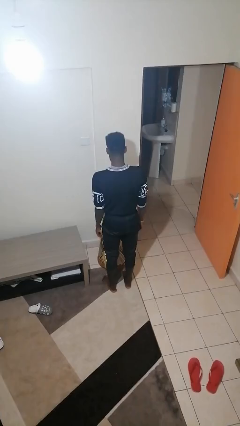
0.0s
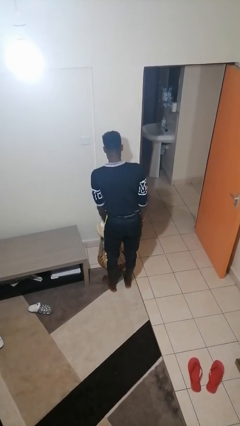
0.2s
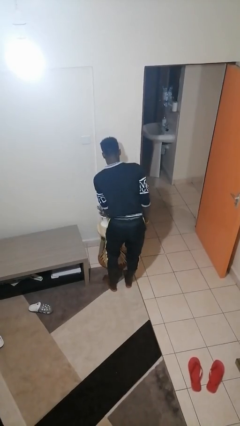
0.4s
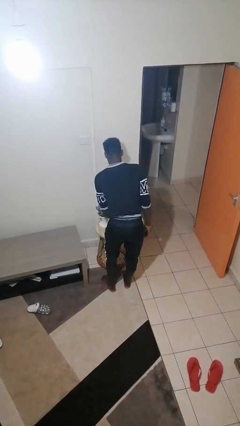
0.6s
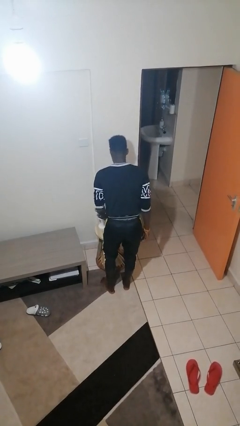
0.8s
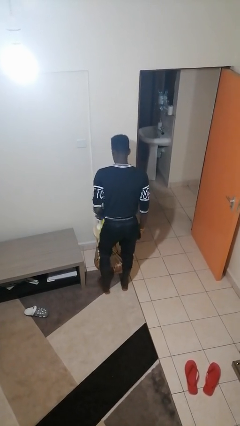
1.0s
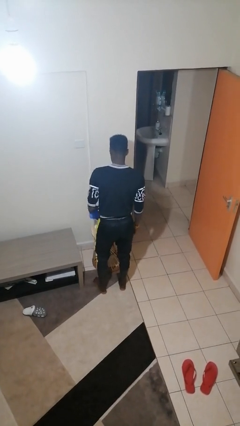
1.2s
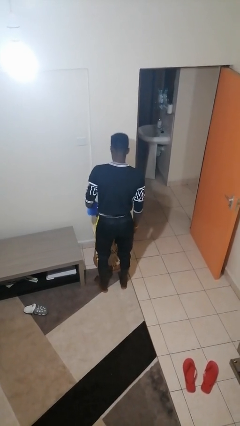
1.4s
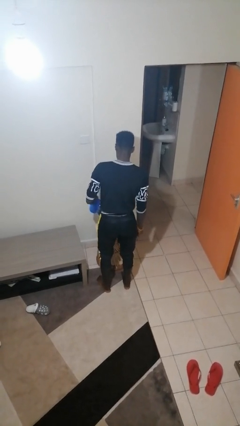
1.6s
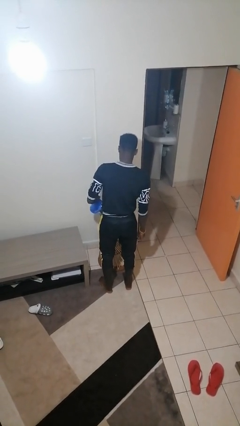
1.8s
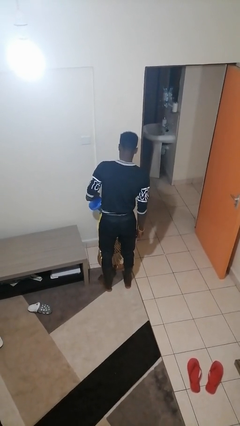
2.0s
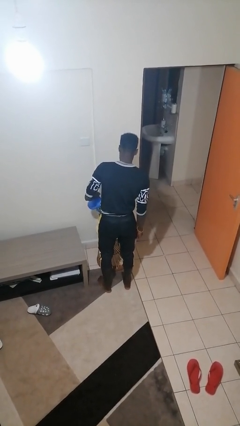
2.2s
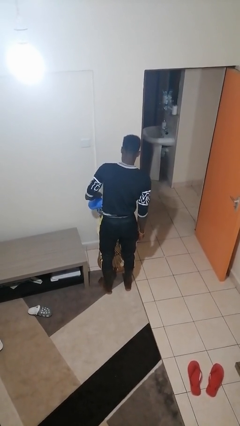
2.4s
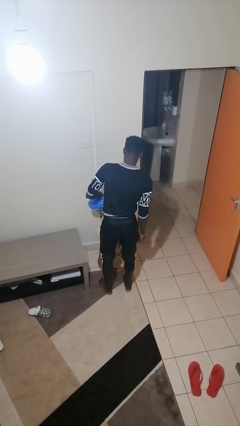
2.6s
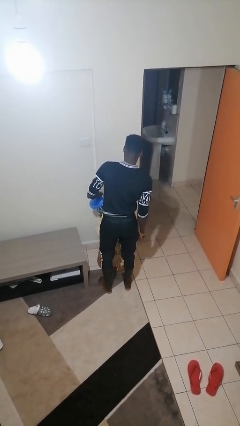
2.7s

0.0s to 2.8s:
person waters houseplant

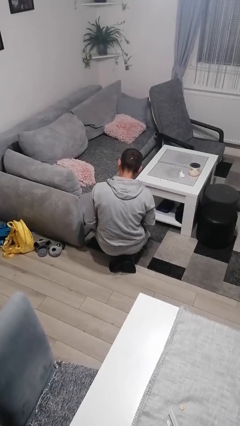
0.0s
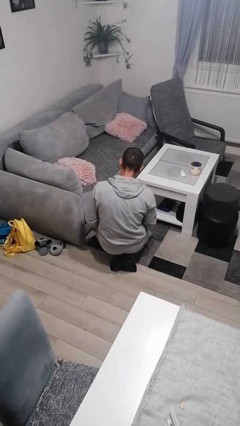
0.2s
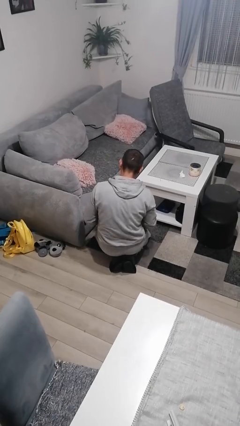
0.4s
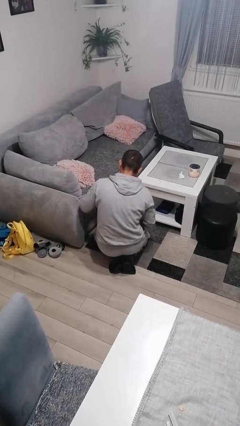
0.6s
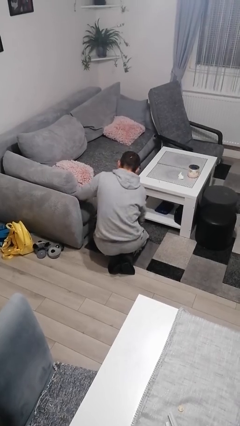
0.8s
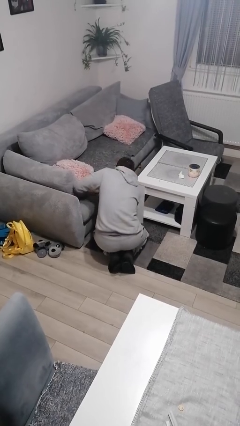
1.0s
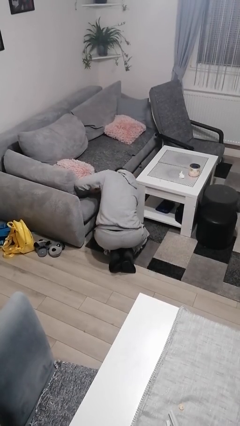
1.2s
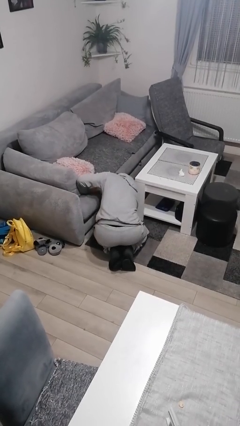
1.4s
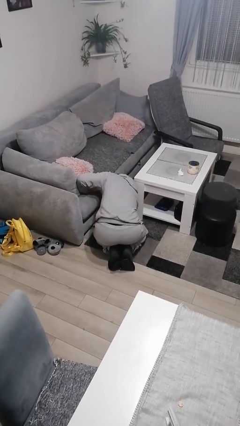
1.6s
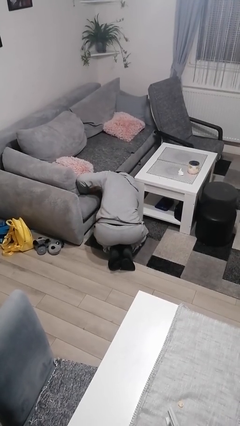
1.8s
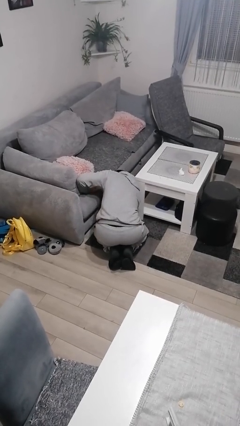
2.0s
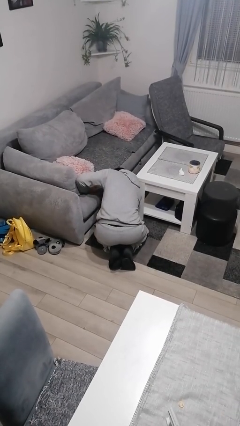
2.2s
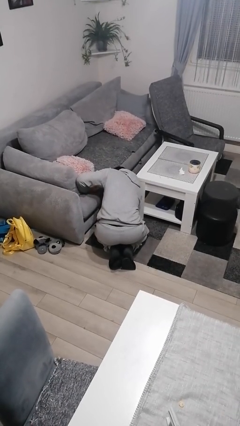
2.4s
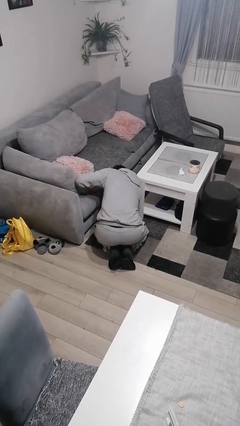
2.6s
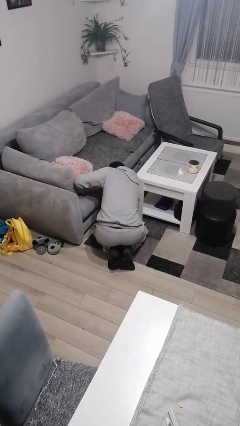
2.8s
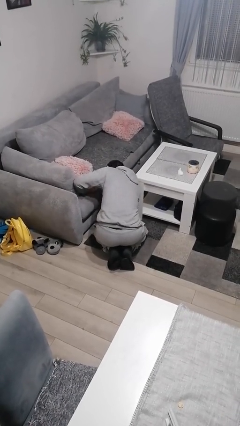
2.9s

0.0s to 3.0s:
person searches under couch

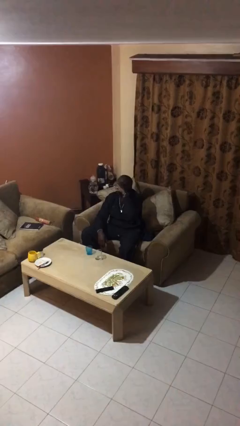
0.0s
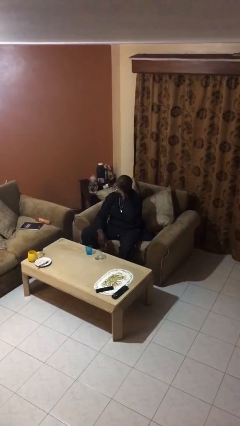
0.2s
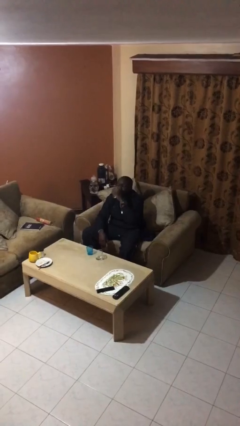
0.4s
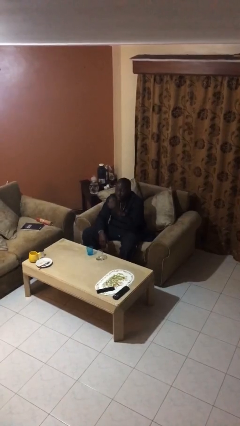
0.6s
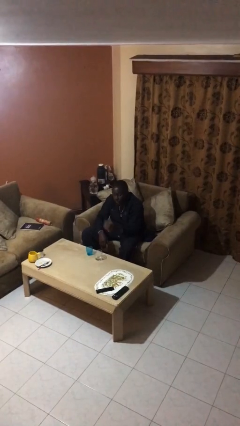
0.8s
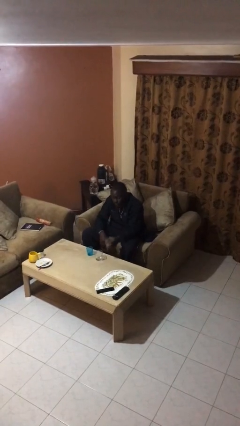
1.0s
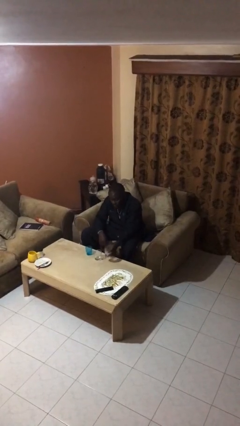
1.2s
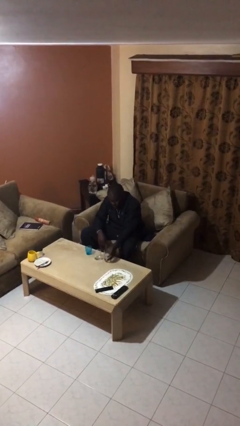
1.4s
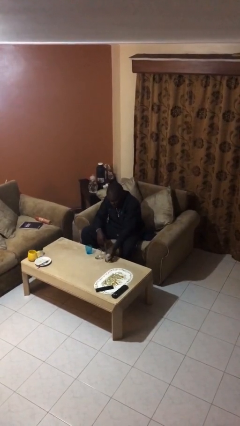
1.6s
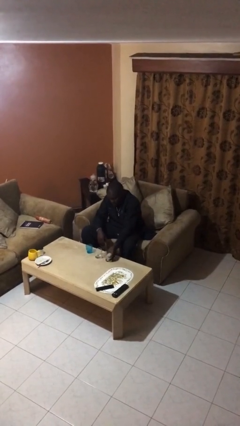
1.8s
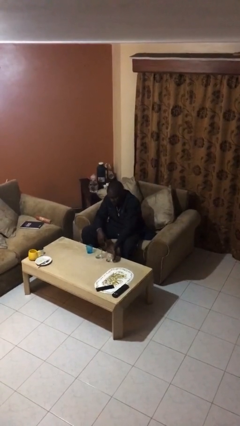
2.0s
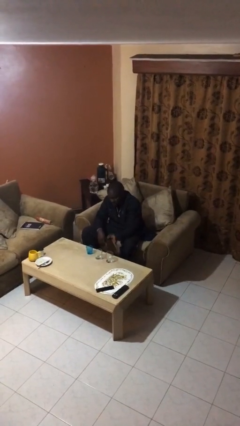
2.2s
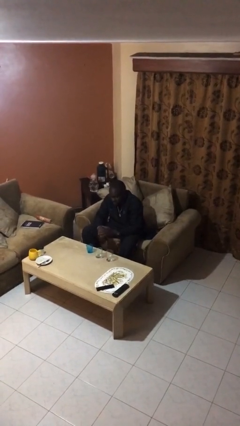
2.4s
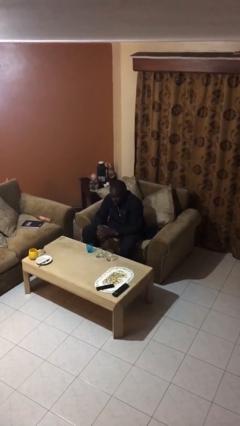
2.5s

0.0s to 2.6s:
person puts down object on table

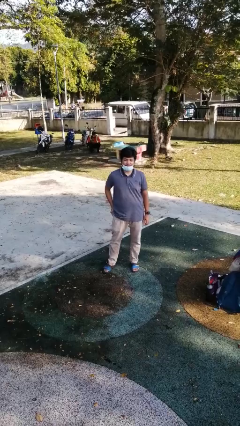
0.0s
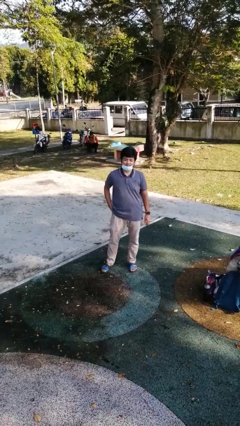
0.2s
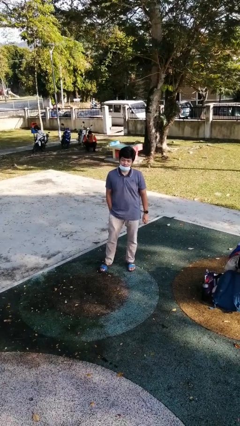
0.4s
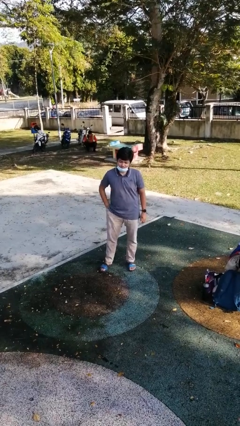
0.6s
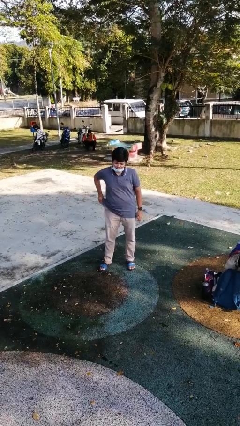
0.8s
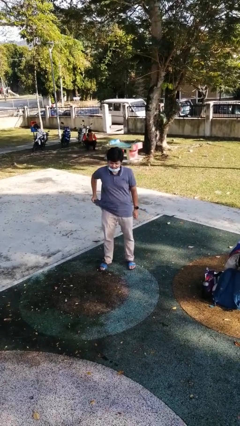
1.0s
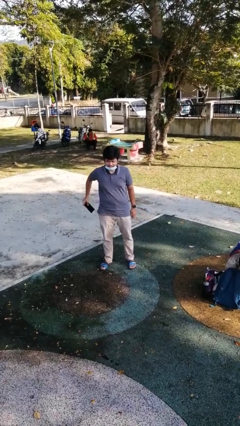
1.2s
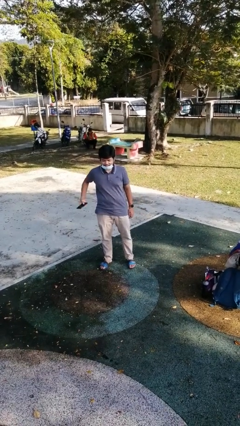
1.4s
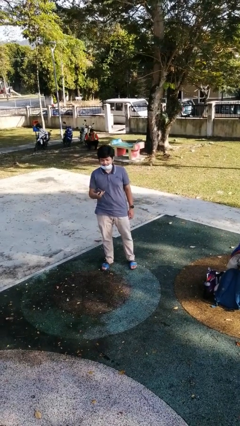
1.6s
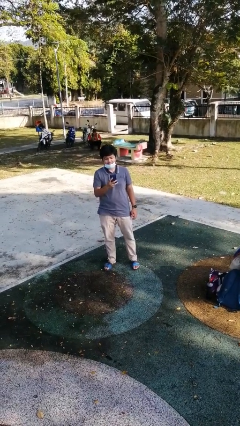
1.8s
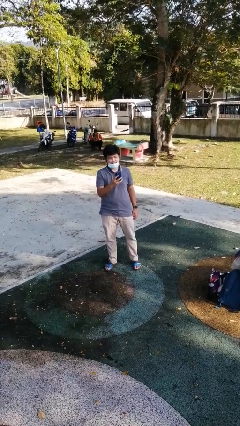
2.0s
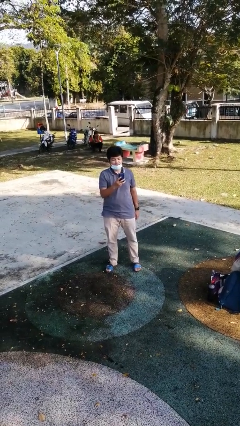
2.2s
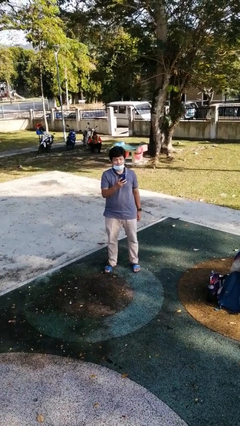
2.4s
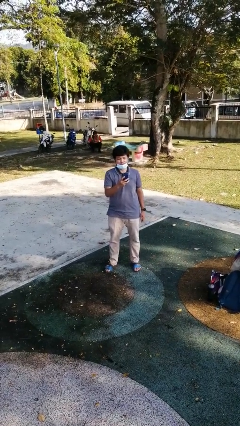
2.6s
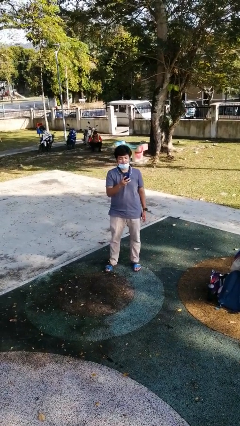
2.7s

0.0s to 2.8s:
person takes phone from pocket

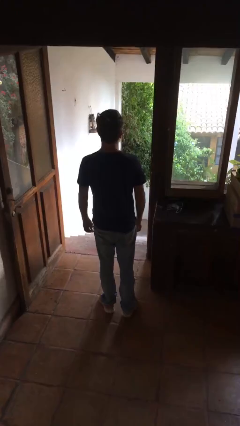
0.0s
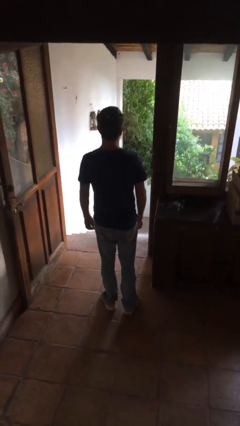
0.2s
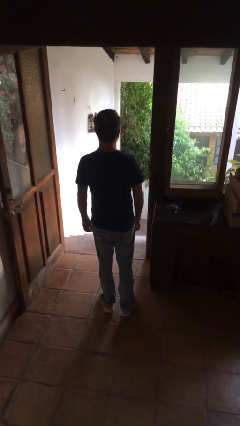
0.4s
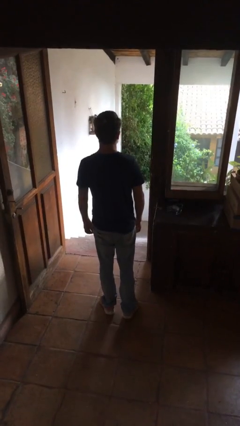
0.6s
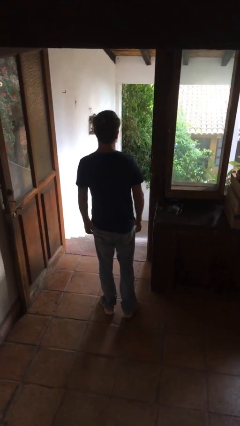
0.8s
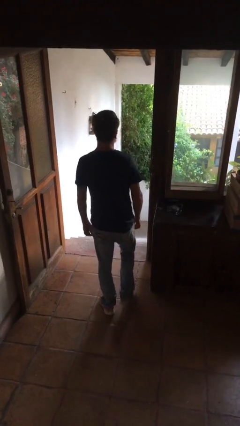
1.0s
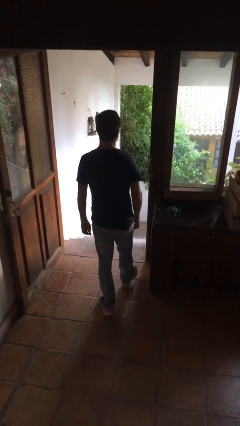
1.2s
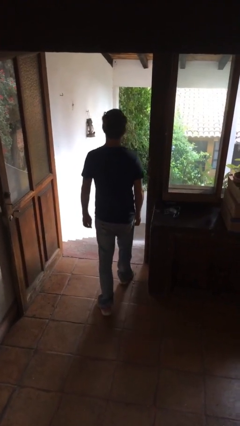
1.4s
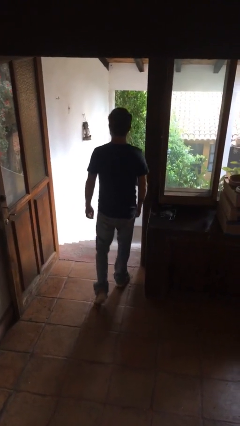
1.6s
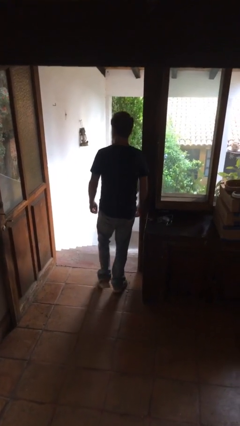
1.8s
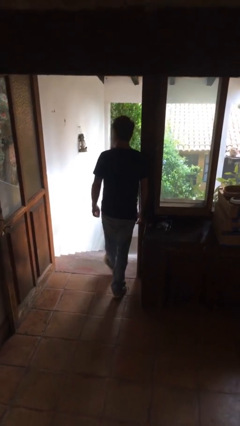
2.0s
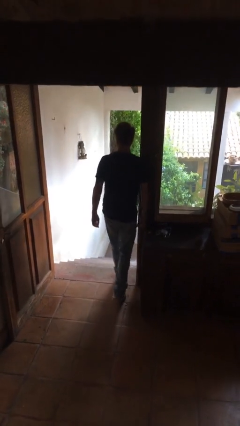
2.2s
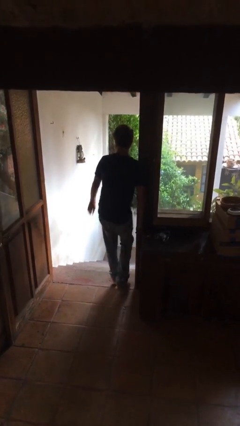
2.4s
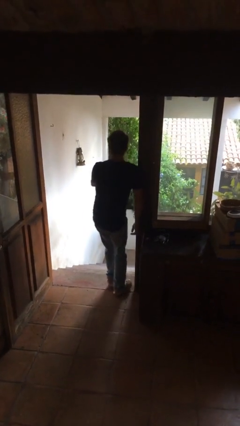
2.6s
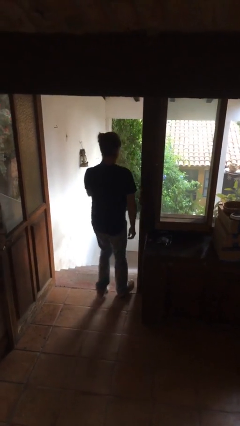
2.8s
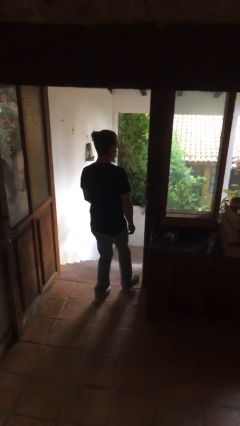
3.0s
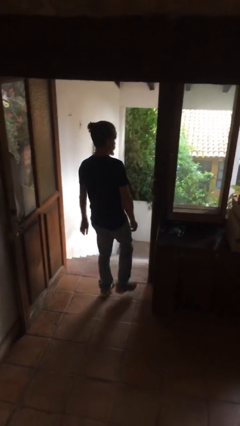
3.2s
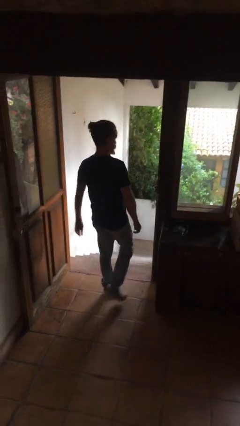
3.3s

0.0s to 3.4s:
person bumps into wall

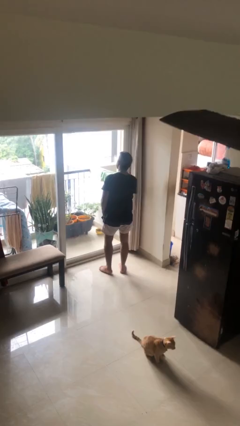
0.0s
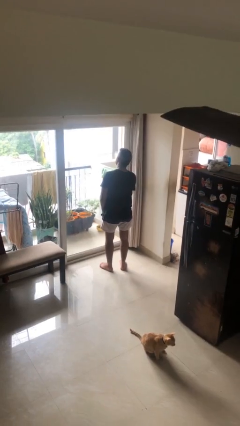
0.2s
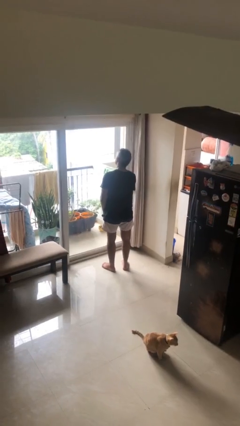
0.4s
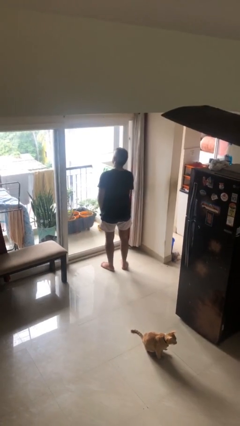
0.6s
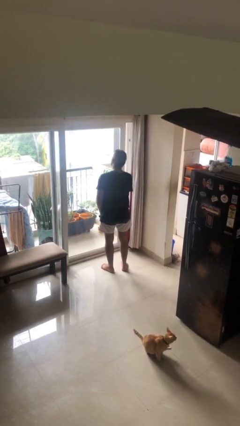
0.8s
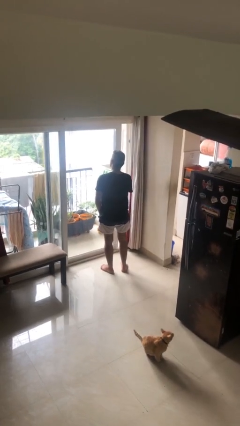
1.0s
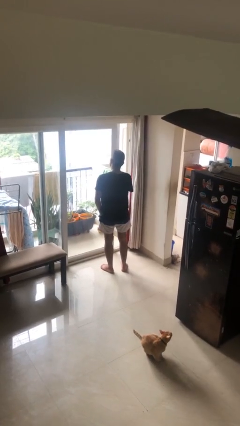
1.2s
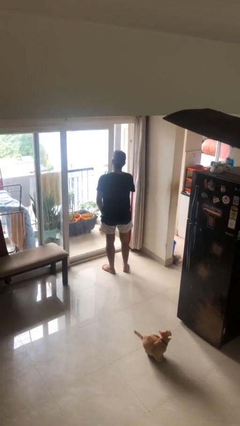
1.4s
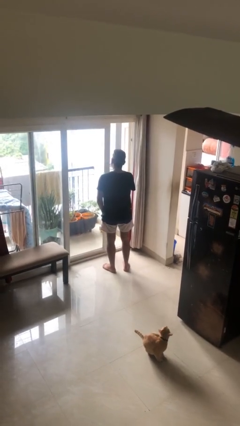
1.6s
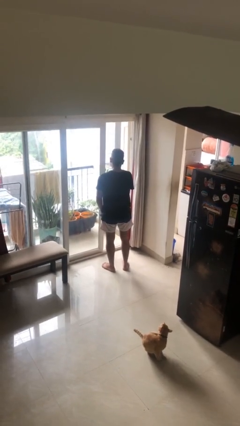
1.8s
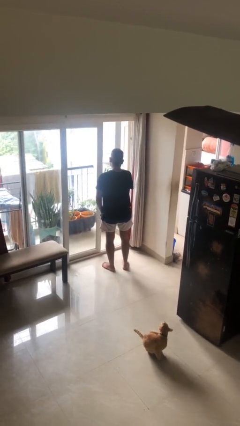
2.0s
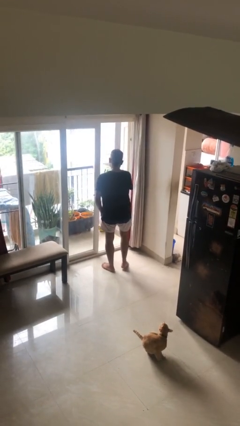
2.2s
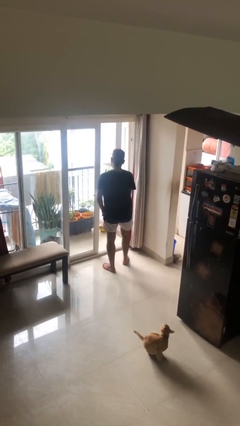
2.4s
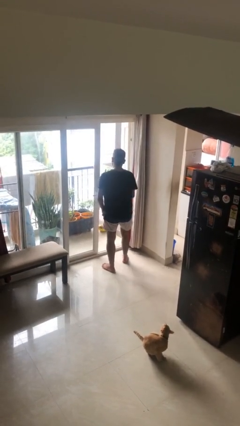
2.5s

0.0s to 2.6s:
person opens facility door

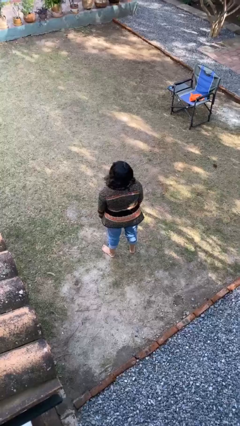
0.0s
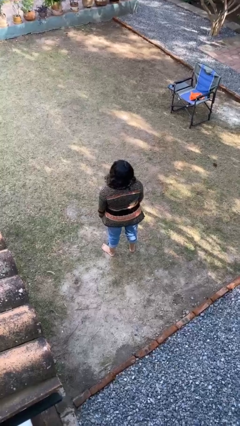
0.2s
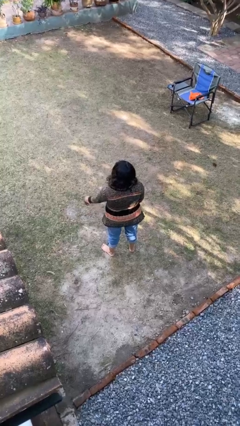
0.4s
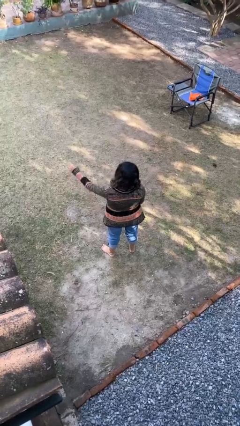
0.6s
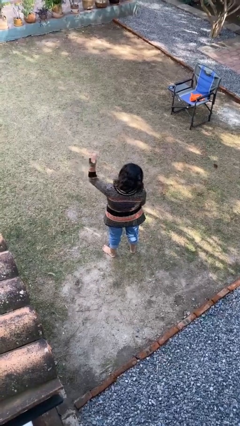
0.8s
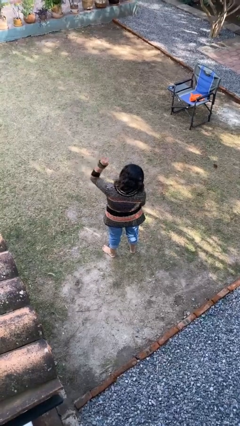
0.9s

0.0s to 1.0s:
person gestures hang loose
